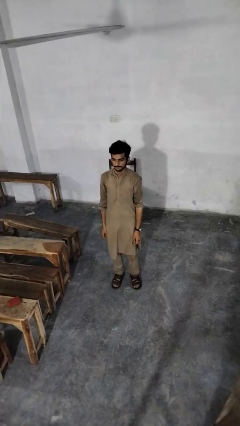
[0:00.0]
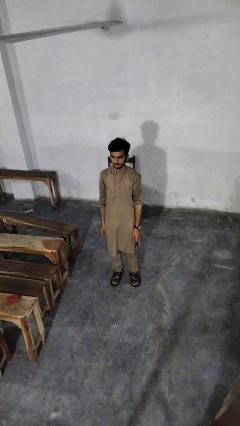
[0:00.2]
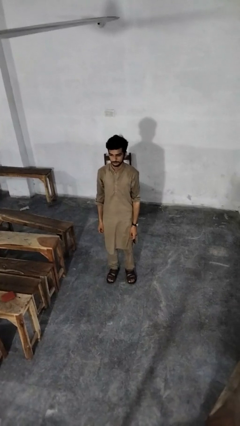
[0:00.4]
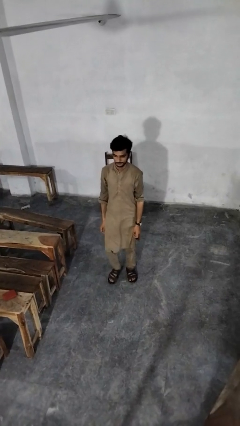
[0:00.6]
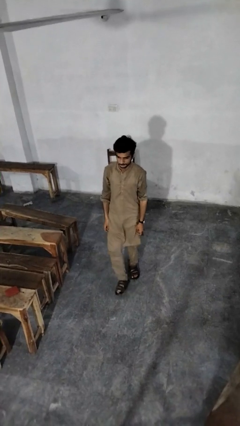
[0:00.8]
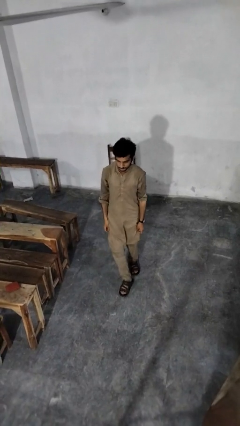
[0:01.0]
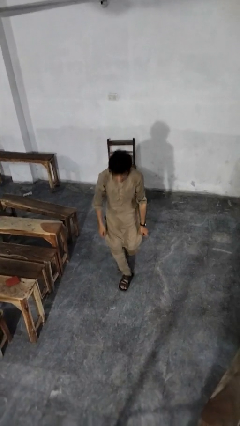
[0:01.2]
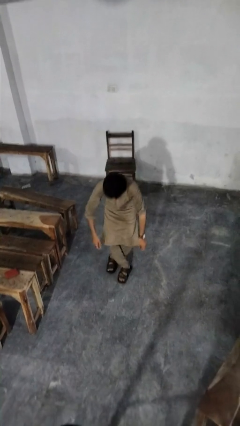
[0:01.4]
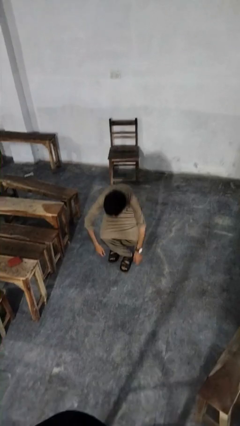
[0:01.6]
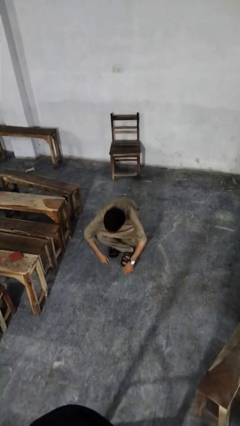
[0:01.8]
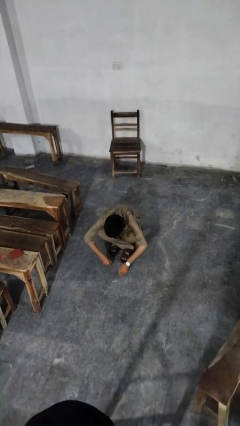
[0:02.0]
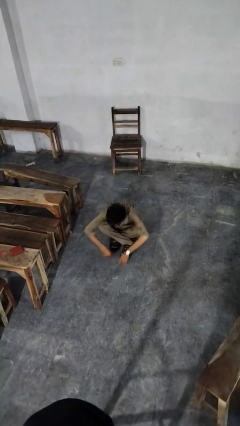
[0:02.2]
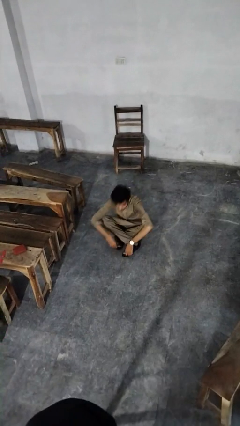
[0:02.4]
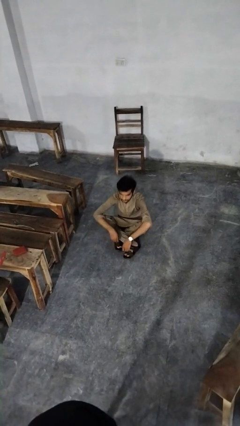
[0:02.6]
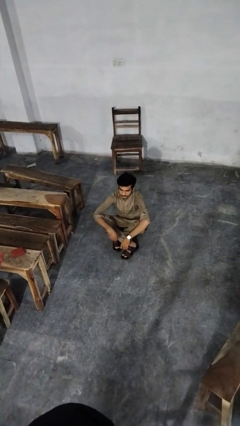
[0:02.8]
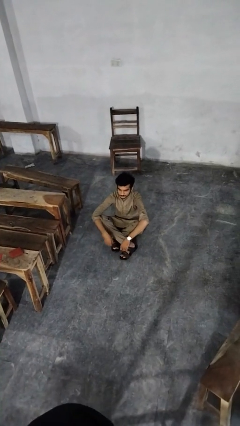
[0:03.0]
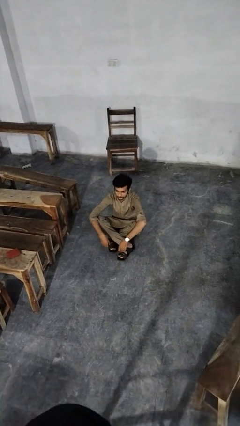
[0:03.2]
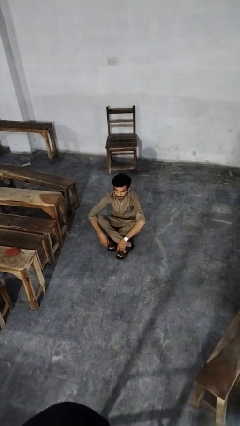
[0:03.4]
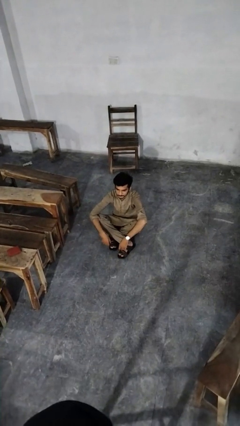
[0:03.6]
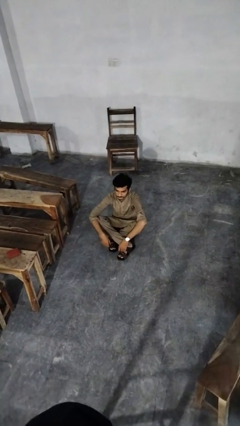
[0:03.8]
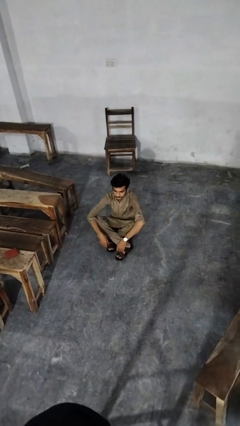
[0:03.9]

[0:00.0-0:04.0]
person sits crisscross

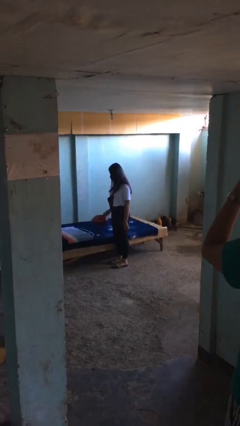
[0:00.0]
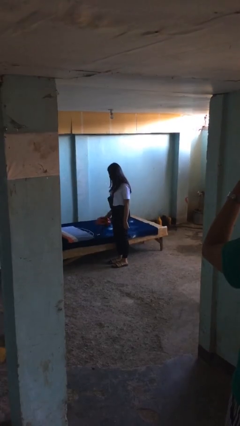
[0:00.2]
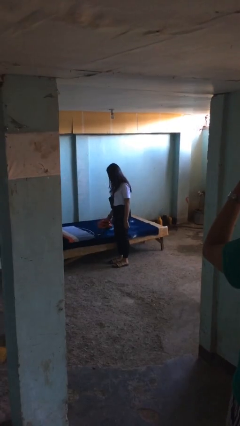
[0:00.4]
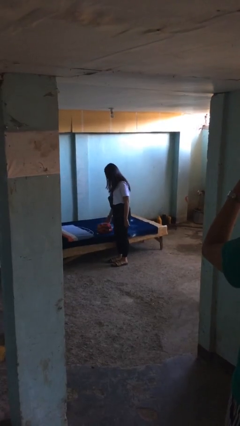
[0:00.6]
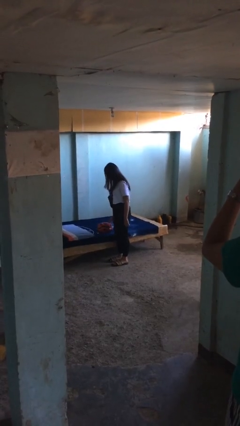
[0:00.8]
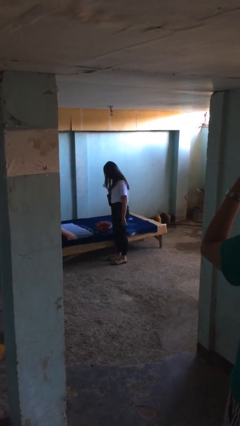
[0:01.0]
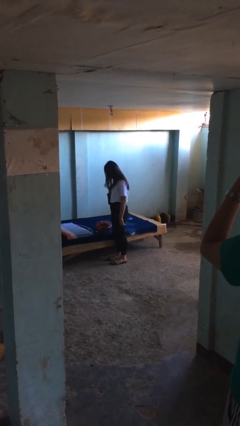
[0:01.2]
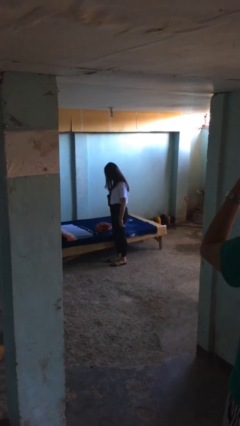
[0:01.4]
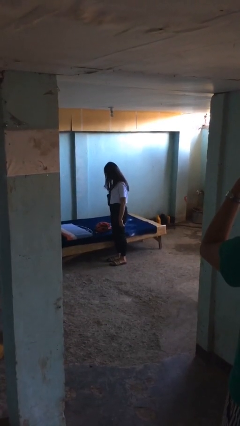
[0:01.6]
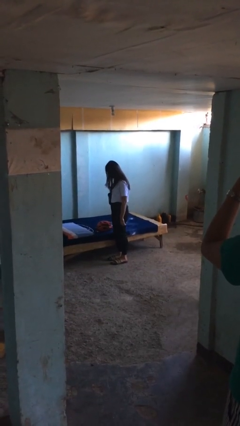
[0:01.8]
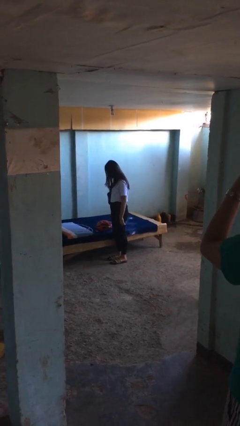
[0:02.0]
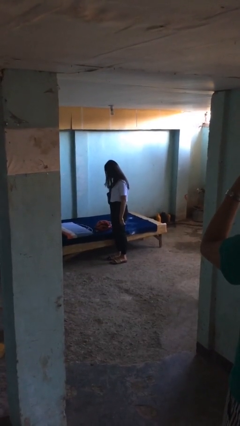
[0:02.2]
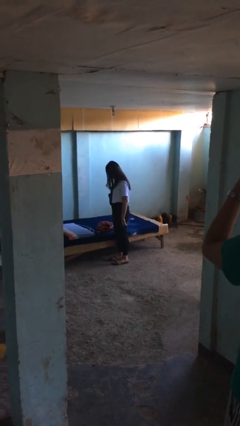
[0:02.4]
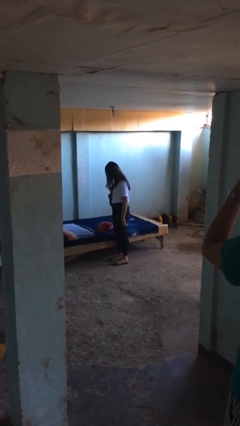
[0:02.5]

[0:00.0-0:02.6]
person puts down object on bed

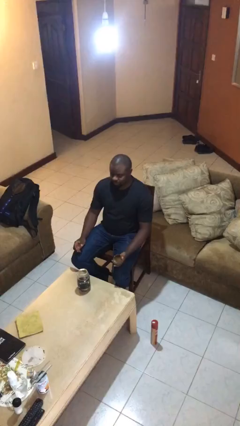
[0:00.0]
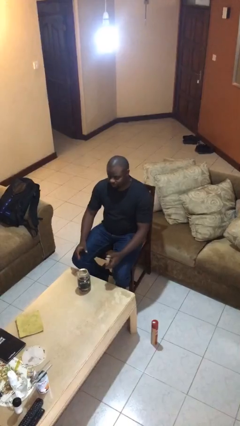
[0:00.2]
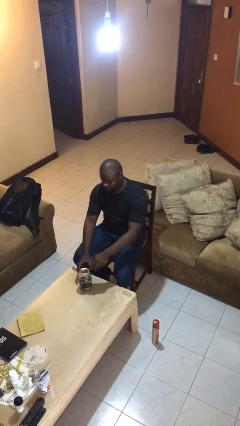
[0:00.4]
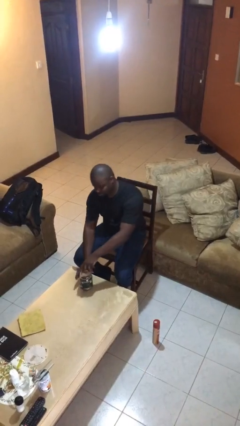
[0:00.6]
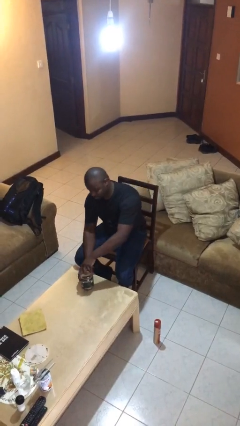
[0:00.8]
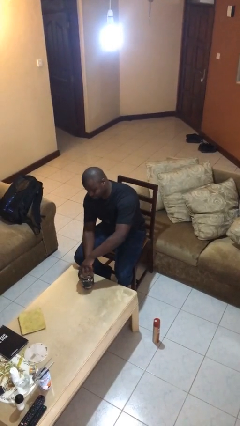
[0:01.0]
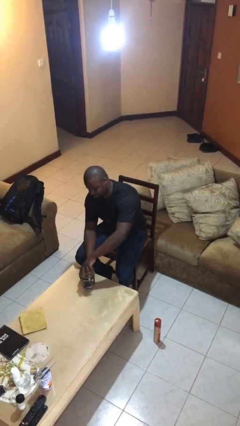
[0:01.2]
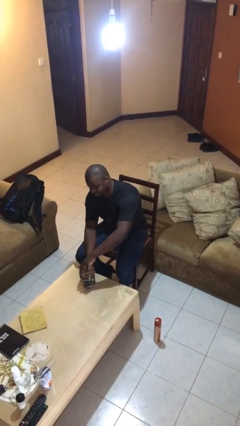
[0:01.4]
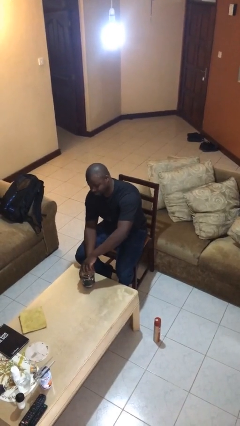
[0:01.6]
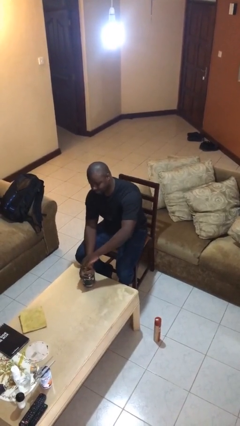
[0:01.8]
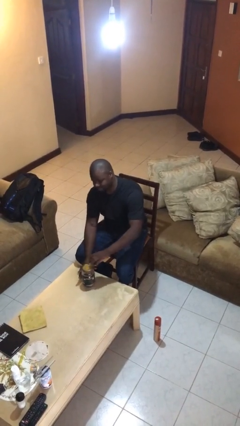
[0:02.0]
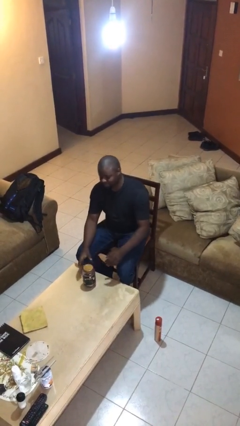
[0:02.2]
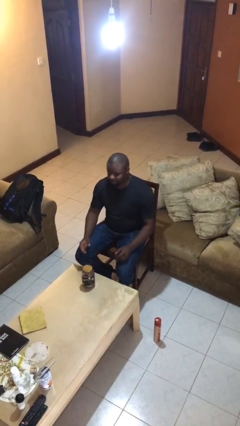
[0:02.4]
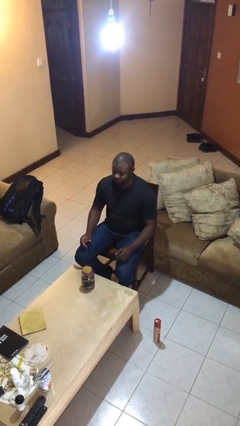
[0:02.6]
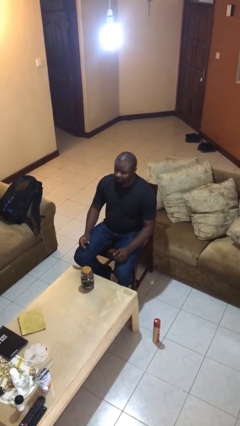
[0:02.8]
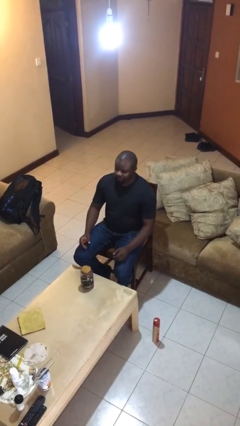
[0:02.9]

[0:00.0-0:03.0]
person closes jar

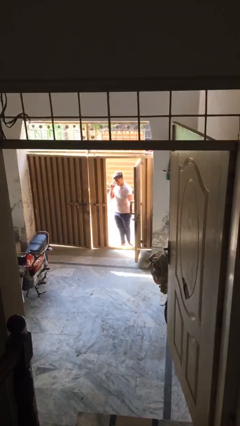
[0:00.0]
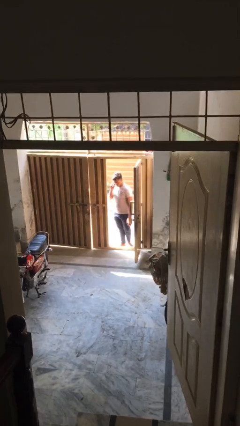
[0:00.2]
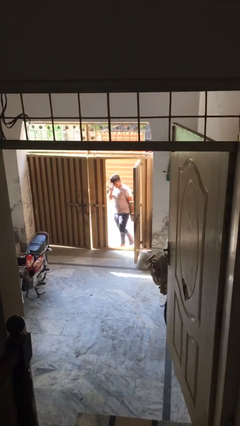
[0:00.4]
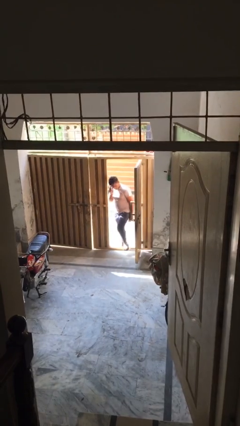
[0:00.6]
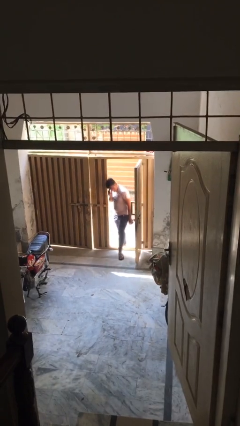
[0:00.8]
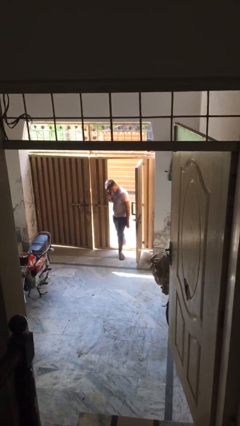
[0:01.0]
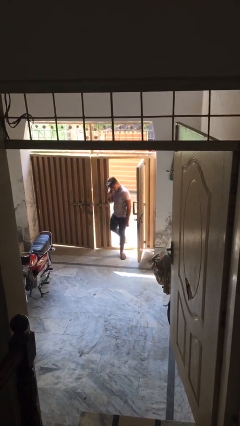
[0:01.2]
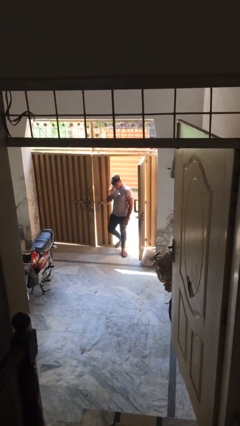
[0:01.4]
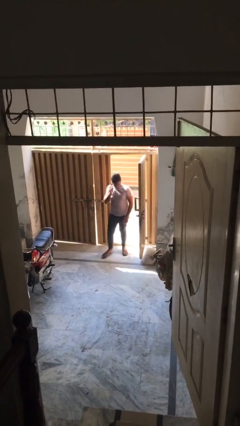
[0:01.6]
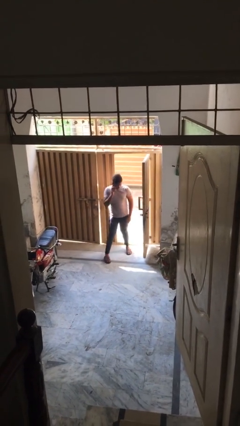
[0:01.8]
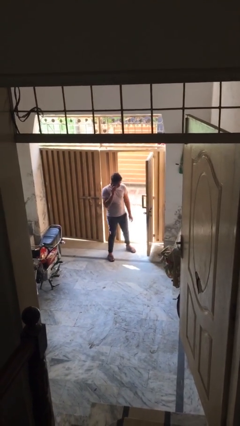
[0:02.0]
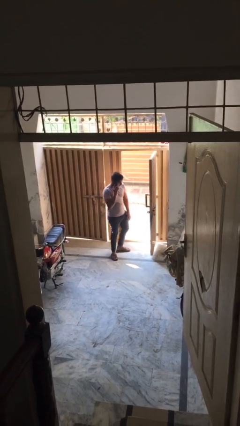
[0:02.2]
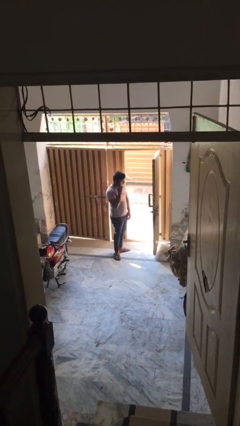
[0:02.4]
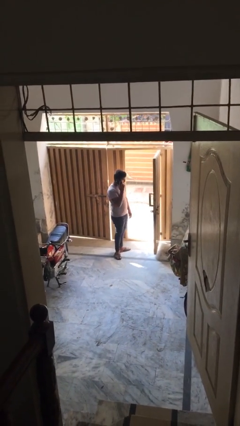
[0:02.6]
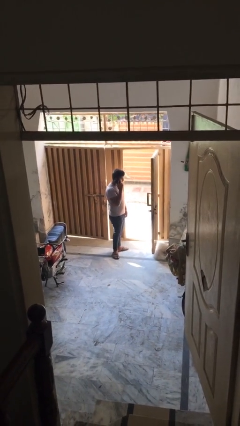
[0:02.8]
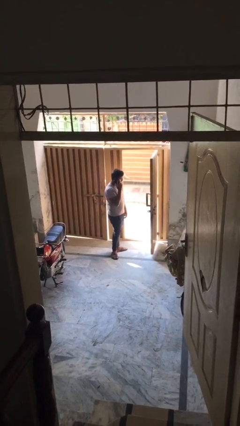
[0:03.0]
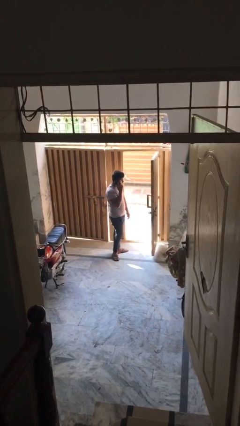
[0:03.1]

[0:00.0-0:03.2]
person enters scene through structure

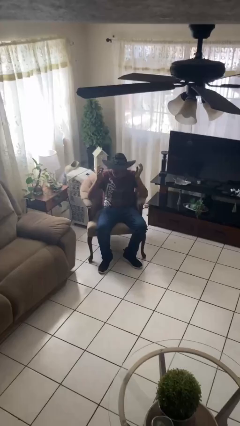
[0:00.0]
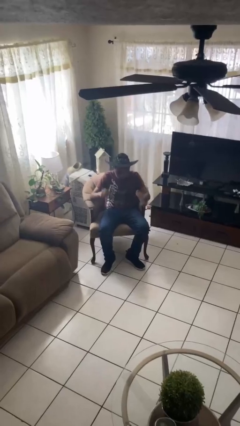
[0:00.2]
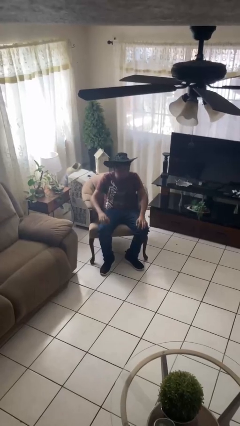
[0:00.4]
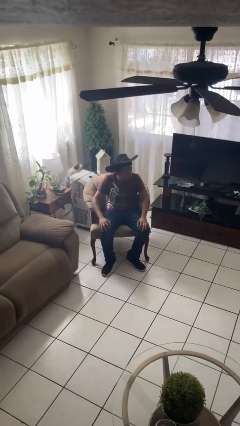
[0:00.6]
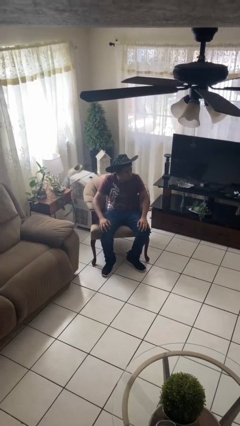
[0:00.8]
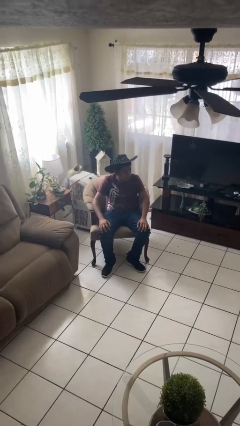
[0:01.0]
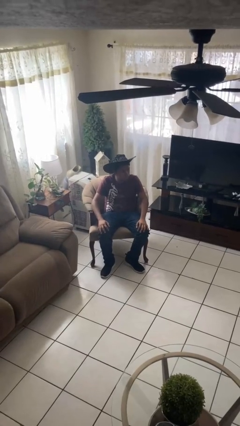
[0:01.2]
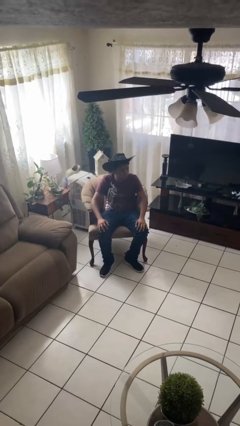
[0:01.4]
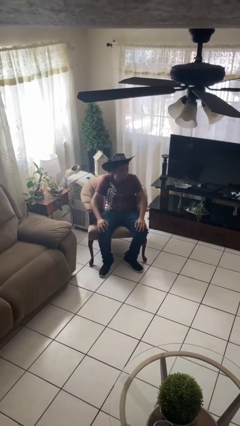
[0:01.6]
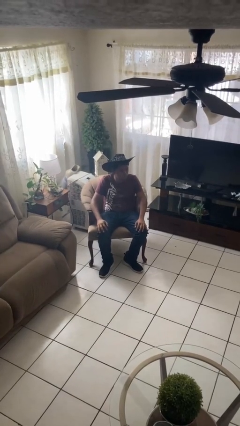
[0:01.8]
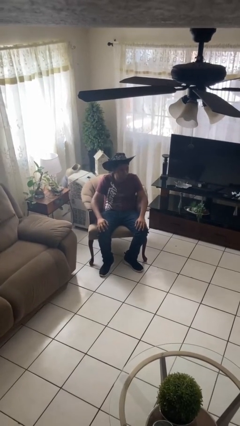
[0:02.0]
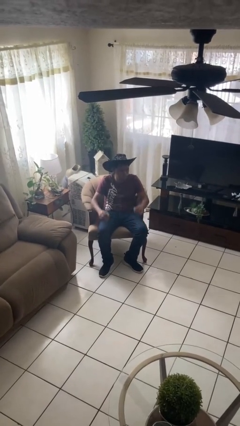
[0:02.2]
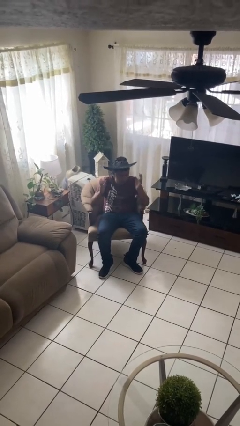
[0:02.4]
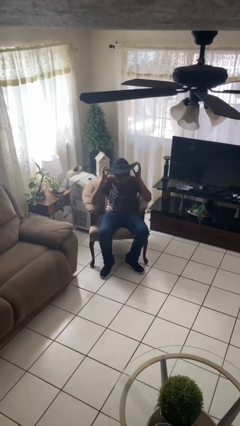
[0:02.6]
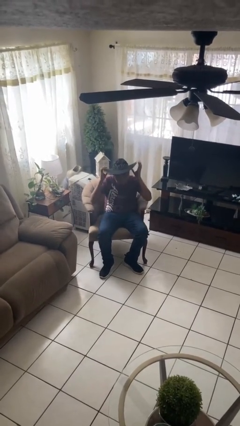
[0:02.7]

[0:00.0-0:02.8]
person puts on hat

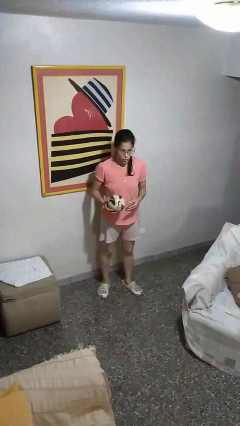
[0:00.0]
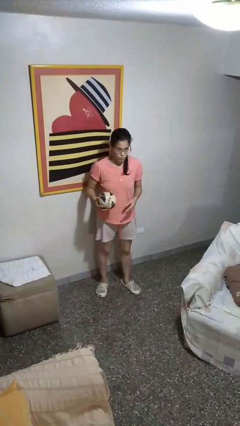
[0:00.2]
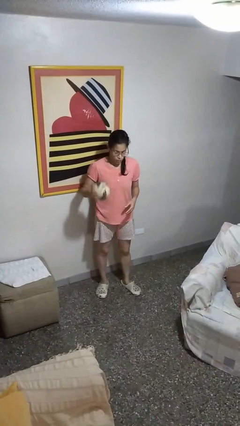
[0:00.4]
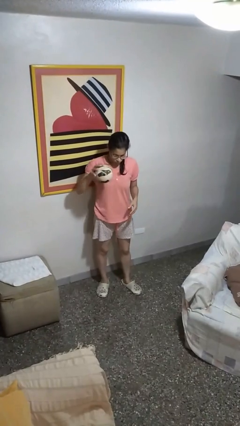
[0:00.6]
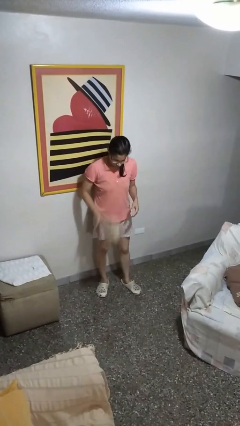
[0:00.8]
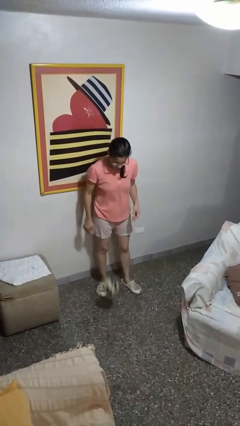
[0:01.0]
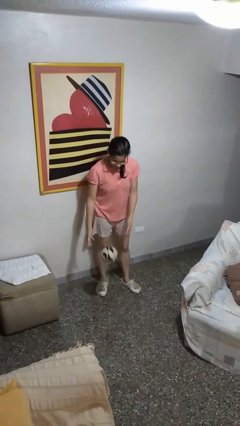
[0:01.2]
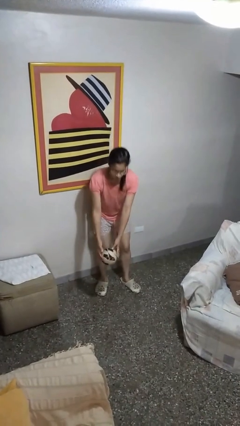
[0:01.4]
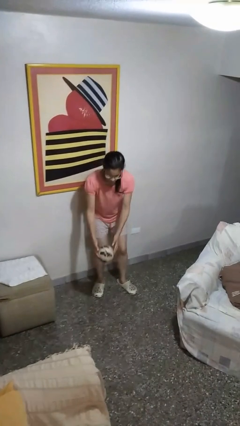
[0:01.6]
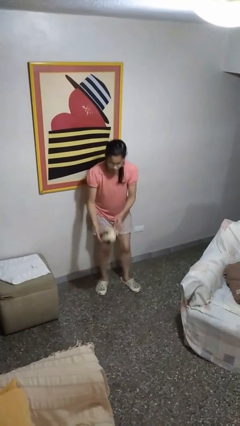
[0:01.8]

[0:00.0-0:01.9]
person bounces ball on floor

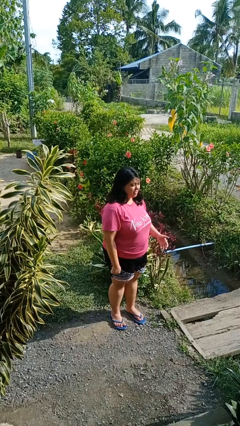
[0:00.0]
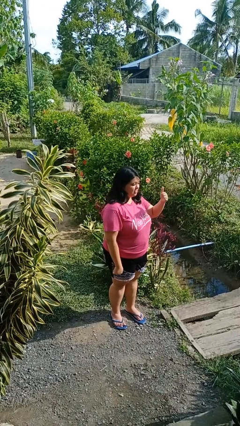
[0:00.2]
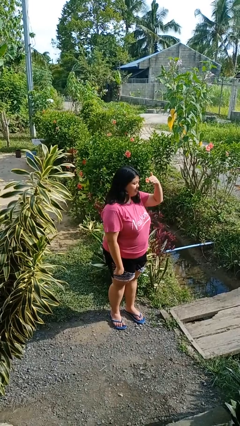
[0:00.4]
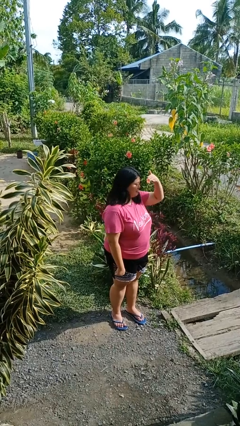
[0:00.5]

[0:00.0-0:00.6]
person shades eyes
